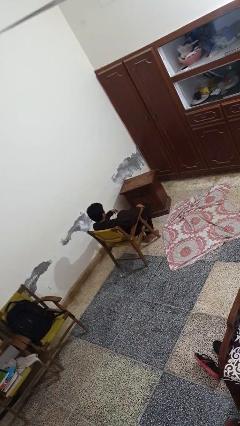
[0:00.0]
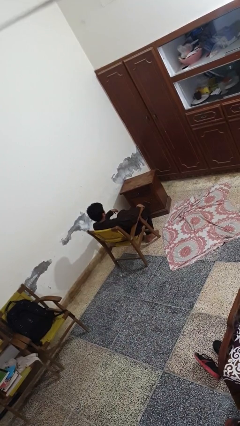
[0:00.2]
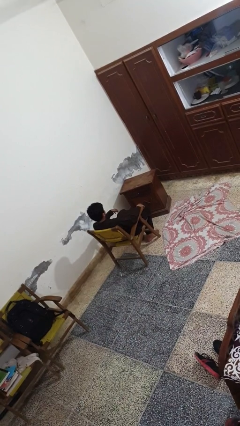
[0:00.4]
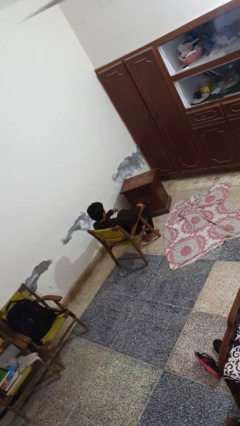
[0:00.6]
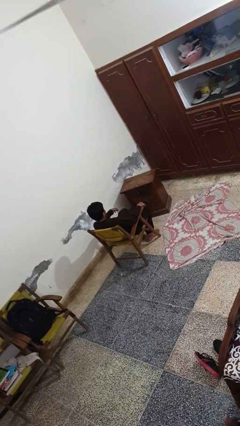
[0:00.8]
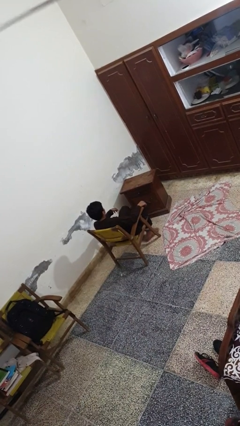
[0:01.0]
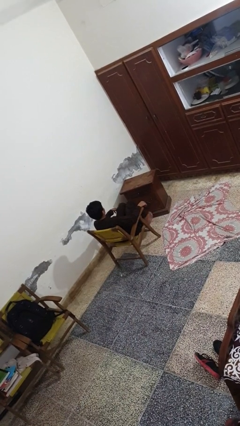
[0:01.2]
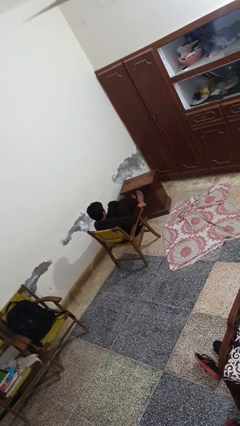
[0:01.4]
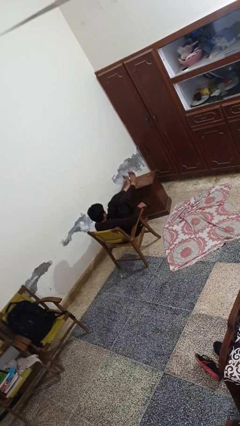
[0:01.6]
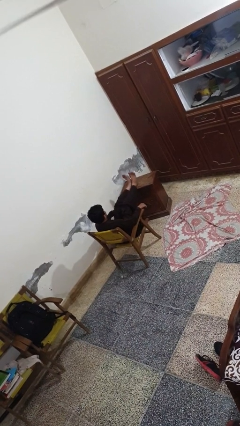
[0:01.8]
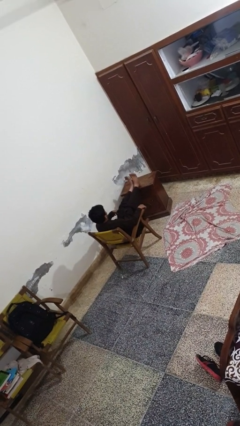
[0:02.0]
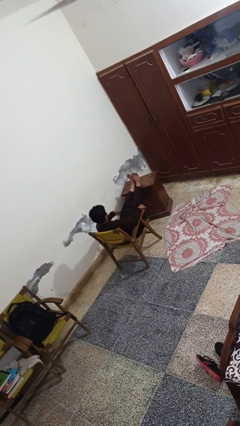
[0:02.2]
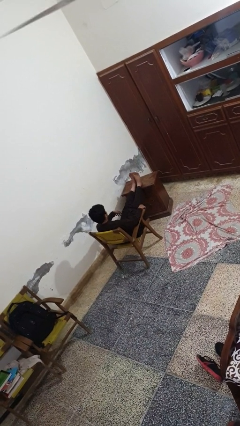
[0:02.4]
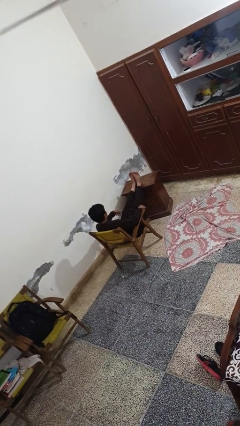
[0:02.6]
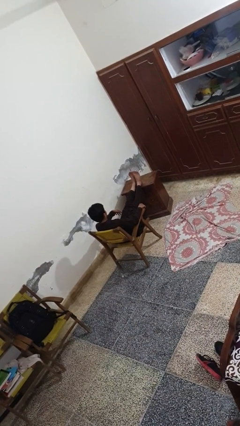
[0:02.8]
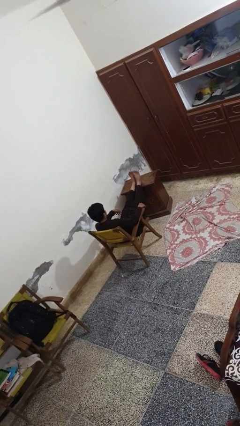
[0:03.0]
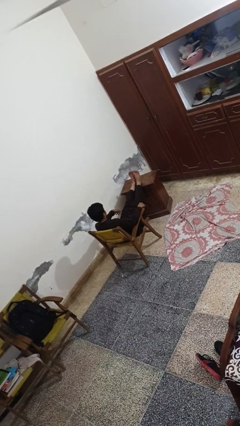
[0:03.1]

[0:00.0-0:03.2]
person puts feet up

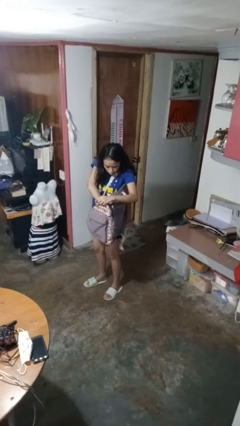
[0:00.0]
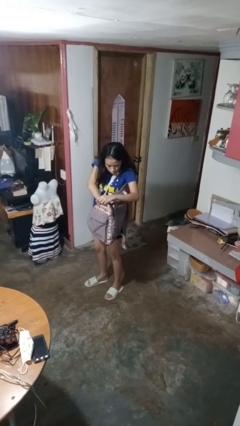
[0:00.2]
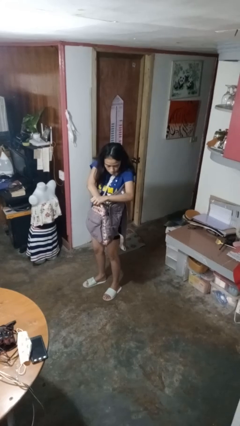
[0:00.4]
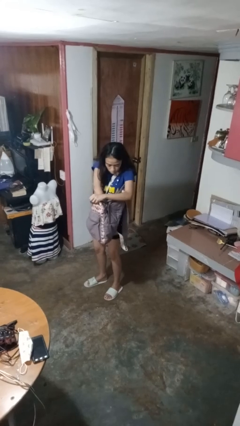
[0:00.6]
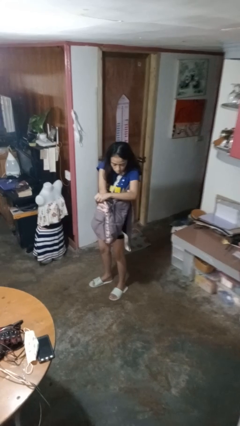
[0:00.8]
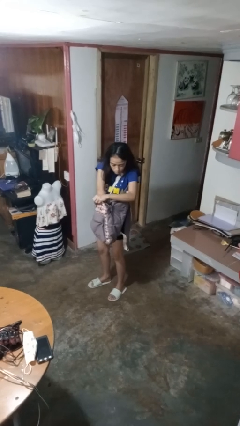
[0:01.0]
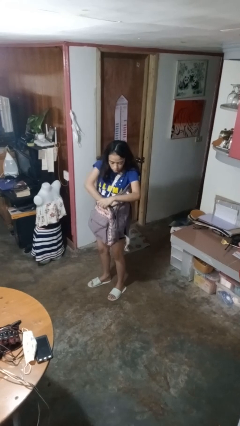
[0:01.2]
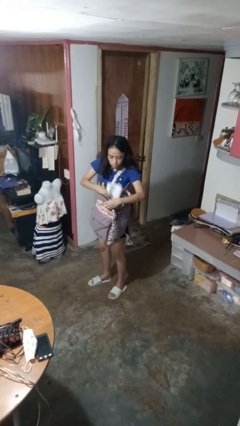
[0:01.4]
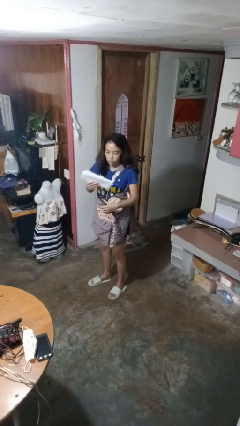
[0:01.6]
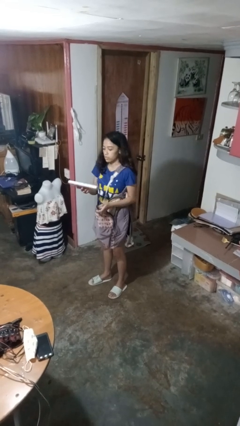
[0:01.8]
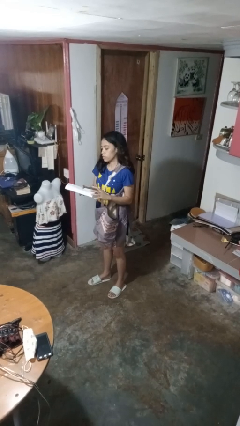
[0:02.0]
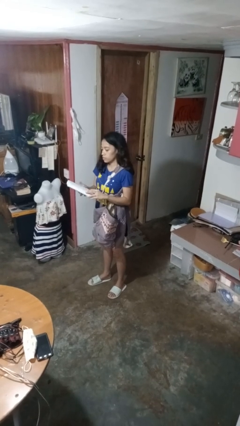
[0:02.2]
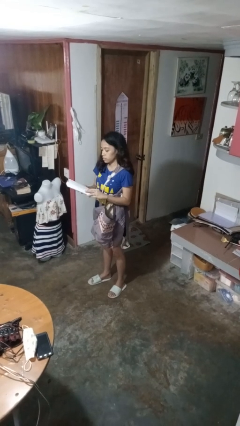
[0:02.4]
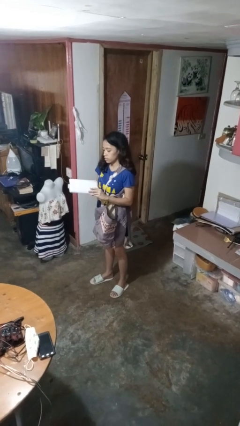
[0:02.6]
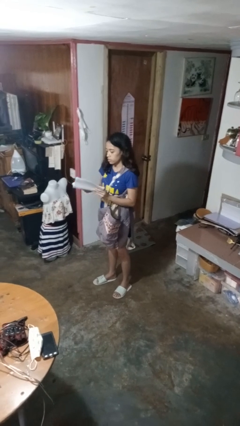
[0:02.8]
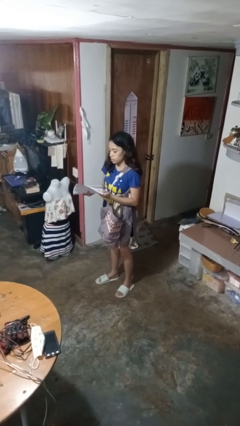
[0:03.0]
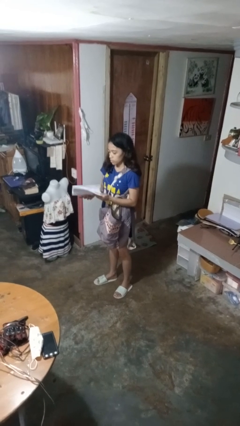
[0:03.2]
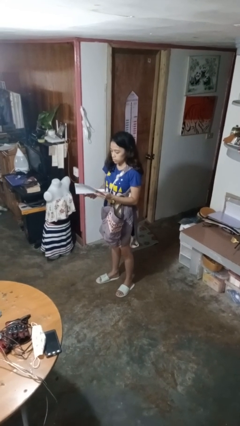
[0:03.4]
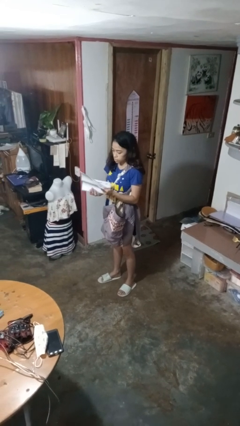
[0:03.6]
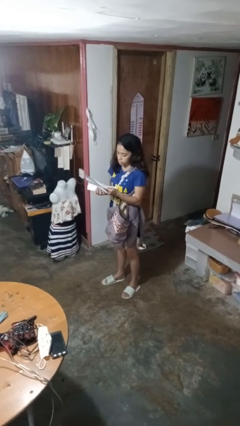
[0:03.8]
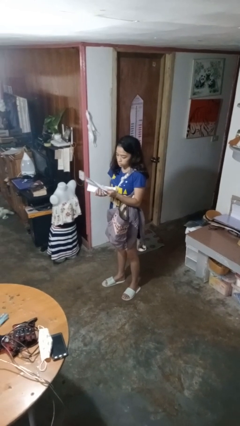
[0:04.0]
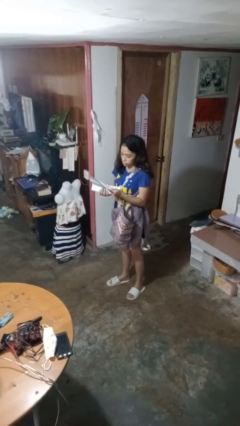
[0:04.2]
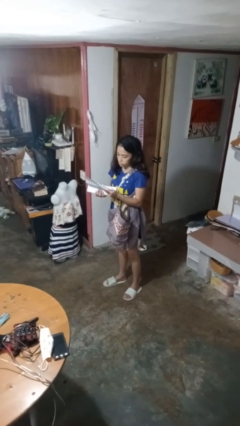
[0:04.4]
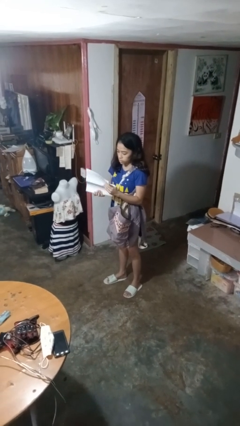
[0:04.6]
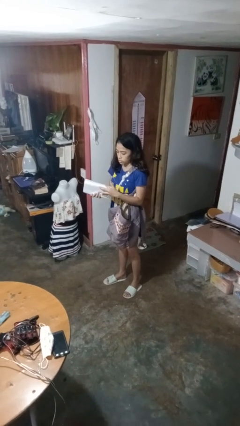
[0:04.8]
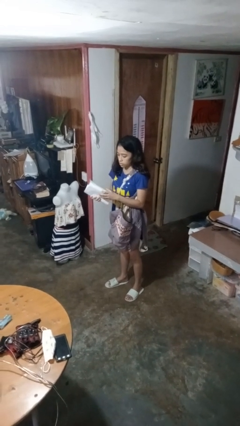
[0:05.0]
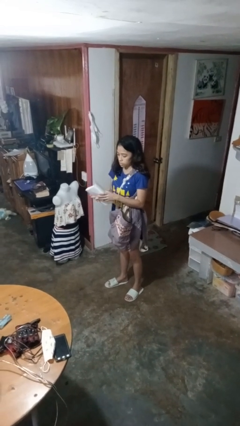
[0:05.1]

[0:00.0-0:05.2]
person takes object from backpack

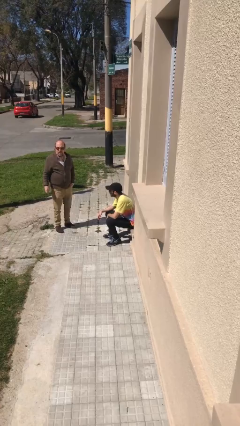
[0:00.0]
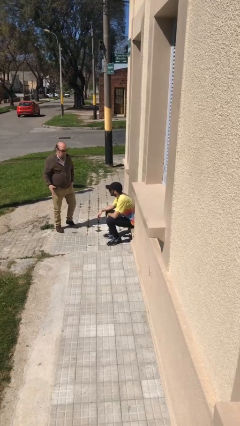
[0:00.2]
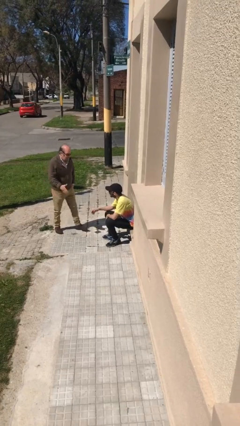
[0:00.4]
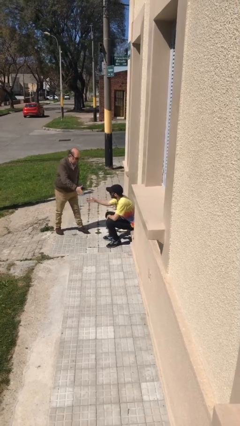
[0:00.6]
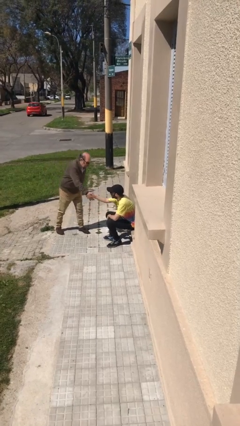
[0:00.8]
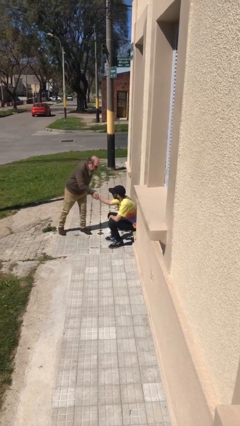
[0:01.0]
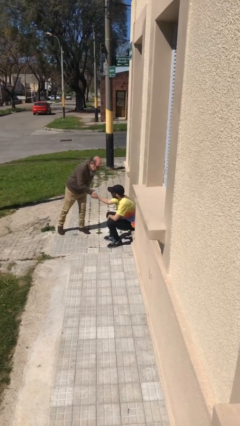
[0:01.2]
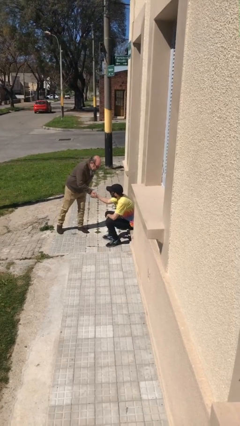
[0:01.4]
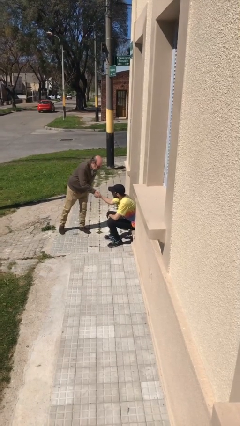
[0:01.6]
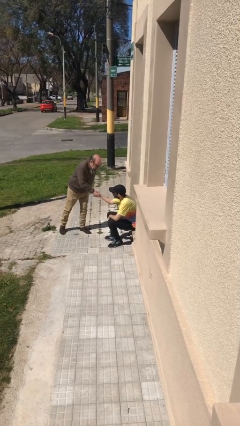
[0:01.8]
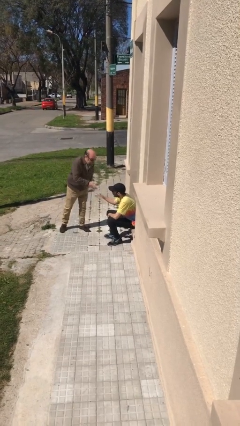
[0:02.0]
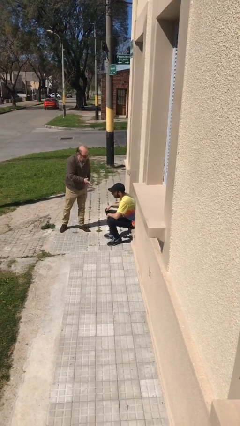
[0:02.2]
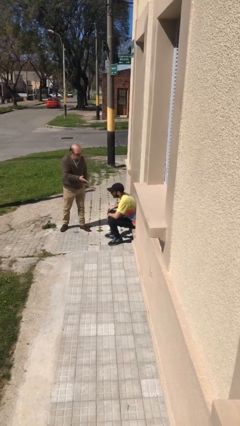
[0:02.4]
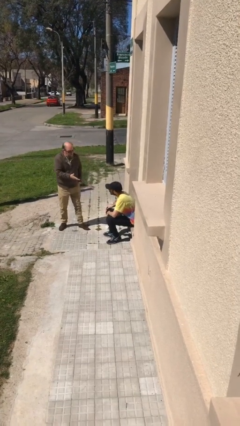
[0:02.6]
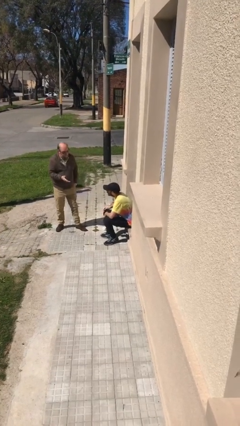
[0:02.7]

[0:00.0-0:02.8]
person shakes hand

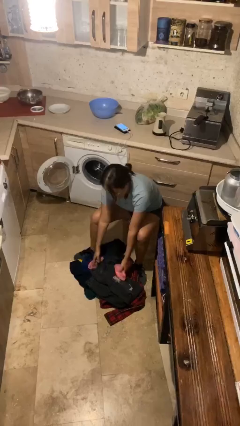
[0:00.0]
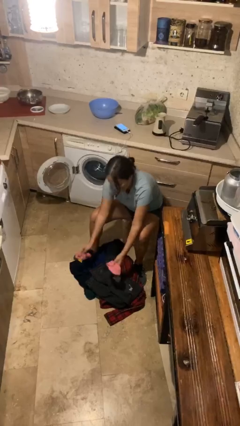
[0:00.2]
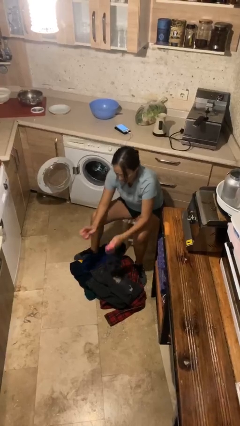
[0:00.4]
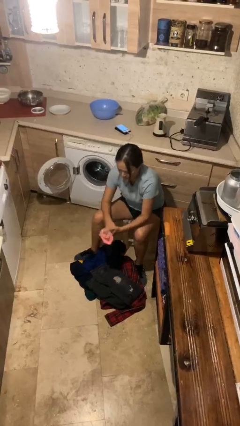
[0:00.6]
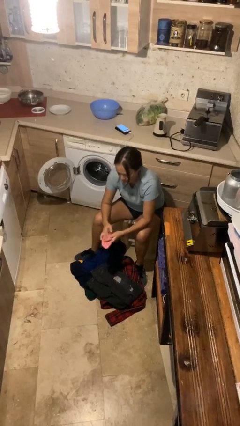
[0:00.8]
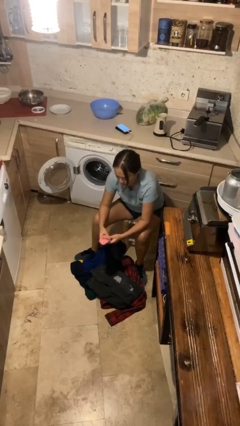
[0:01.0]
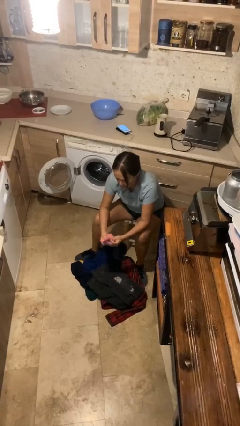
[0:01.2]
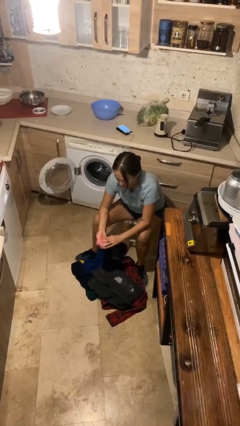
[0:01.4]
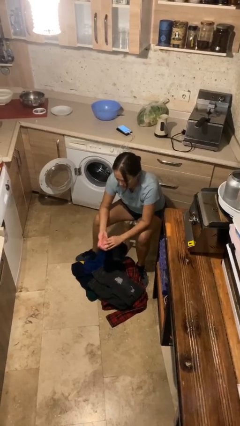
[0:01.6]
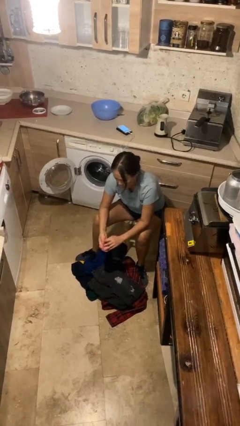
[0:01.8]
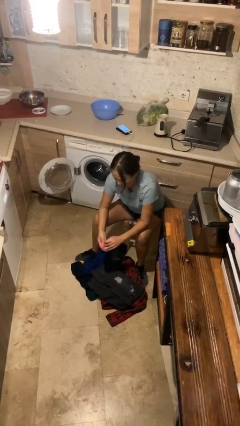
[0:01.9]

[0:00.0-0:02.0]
person folds socks

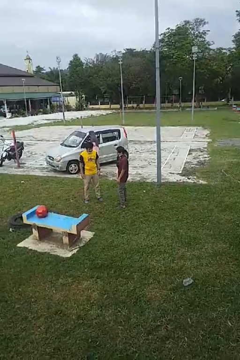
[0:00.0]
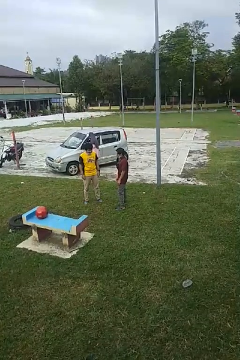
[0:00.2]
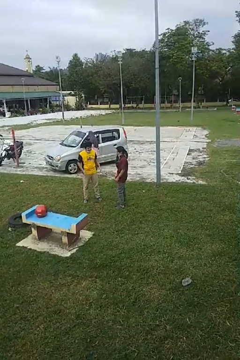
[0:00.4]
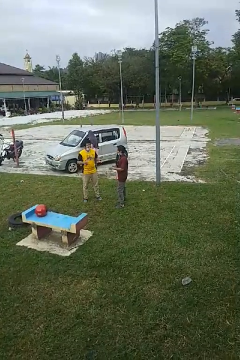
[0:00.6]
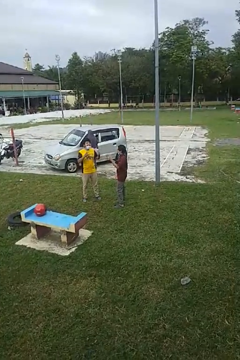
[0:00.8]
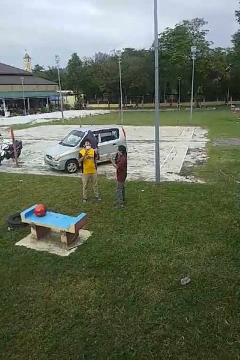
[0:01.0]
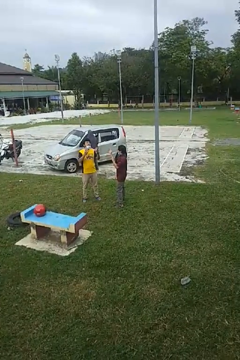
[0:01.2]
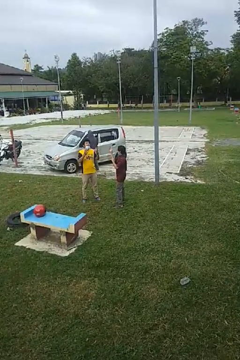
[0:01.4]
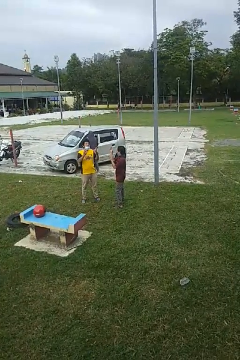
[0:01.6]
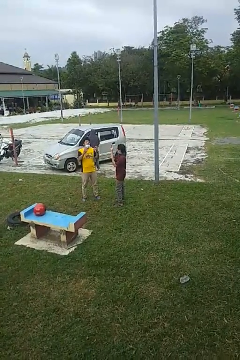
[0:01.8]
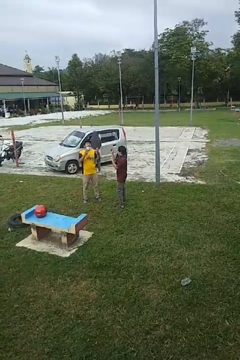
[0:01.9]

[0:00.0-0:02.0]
person talks to person

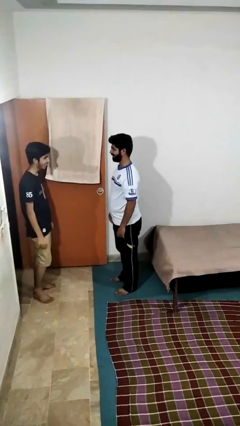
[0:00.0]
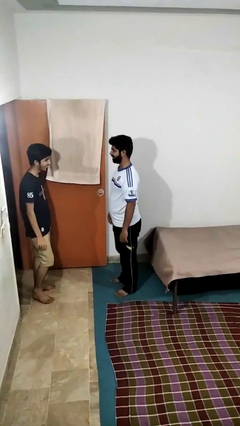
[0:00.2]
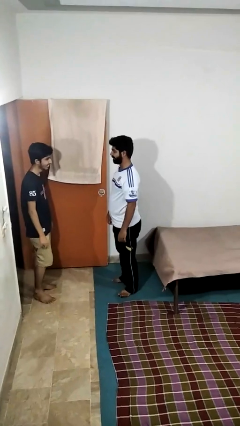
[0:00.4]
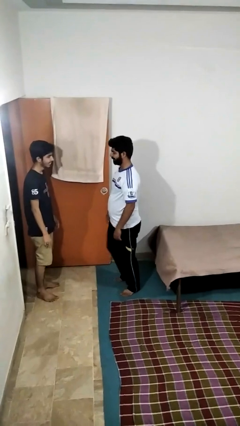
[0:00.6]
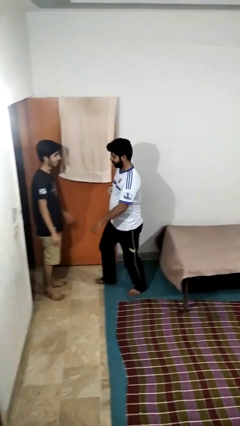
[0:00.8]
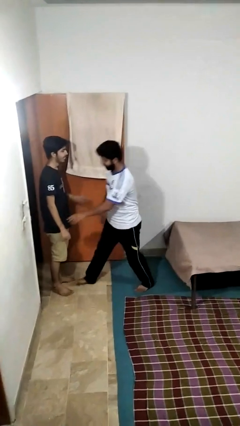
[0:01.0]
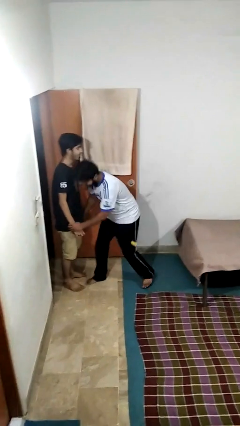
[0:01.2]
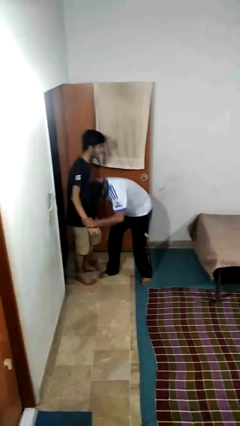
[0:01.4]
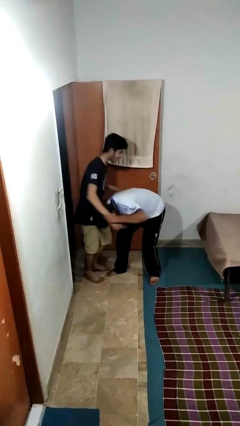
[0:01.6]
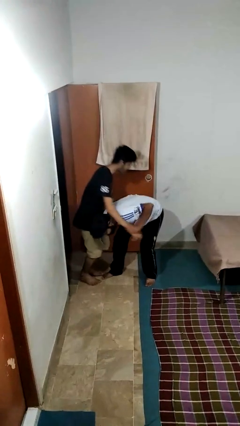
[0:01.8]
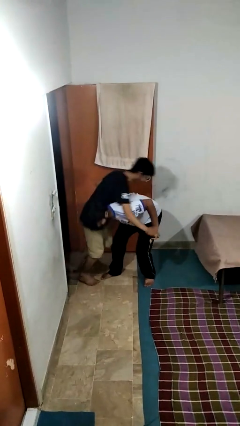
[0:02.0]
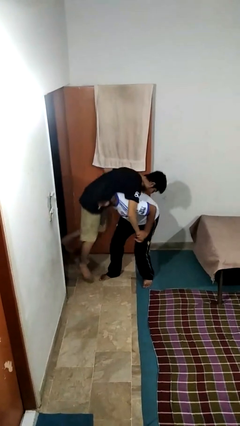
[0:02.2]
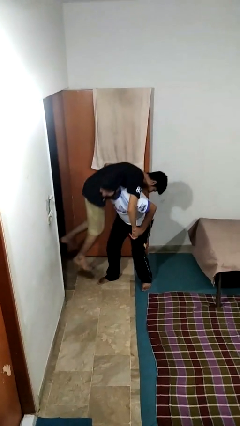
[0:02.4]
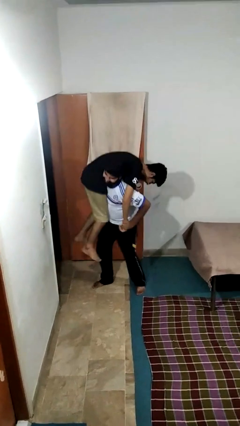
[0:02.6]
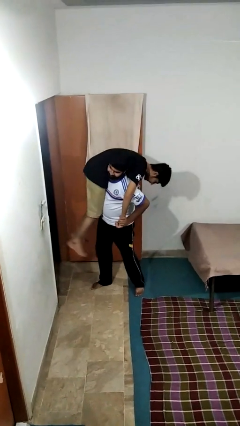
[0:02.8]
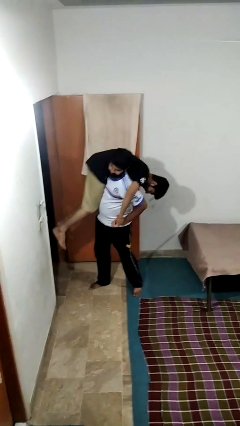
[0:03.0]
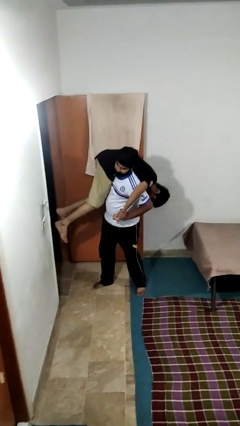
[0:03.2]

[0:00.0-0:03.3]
person carries person over shoulder
